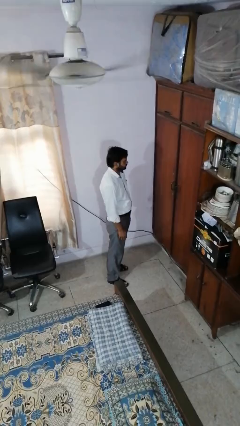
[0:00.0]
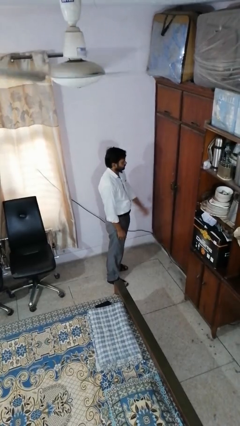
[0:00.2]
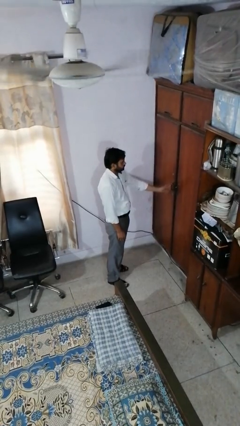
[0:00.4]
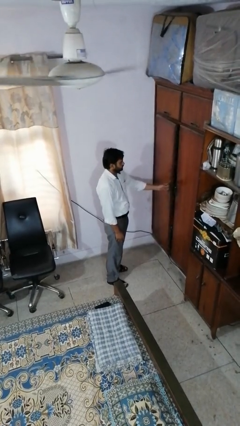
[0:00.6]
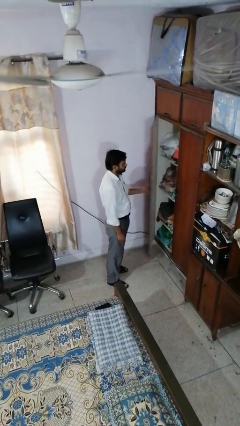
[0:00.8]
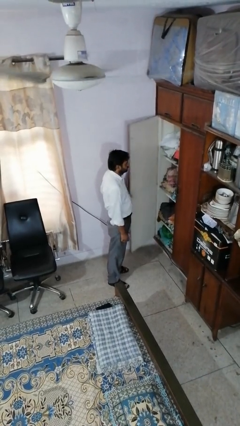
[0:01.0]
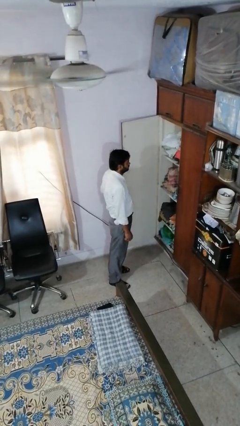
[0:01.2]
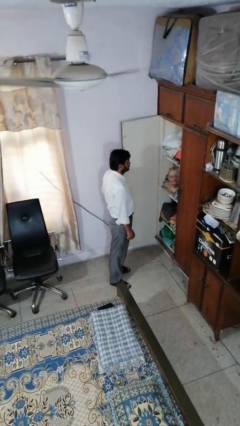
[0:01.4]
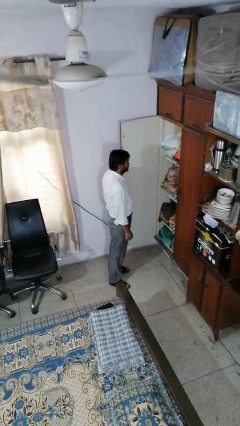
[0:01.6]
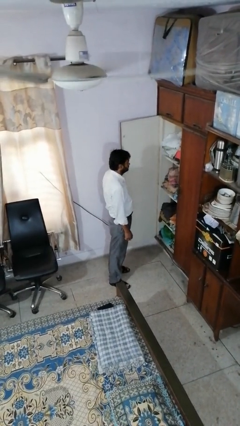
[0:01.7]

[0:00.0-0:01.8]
person opens closet door

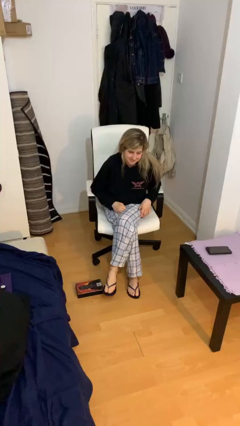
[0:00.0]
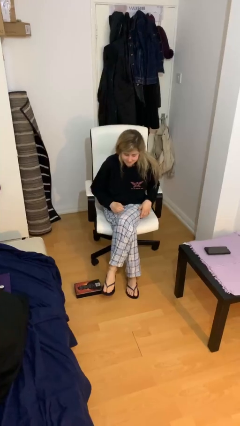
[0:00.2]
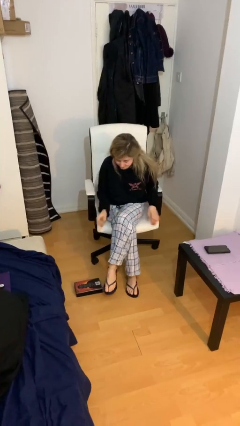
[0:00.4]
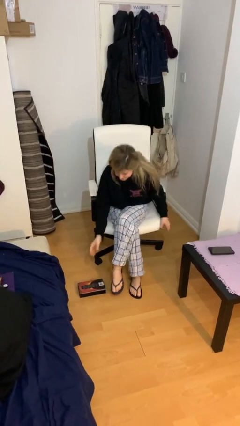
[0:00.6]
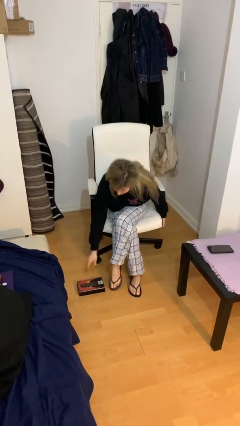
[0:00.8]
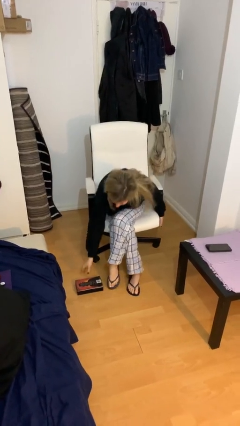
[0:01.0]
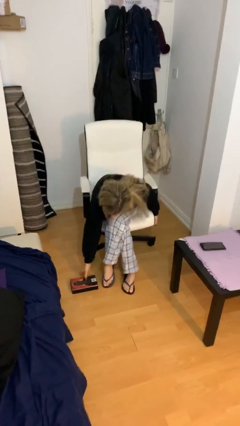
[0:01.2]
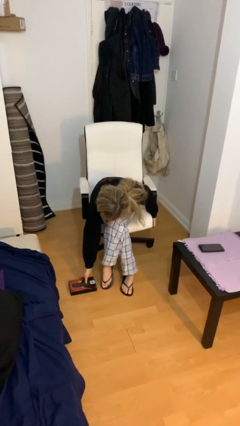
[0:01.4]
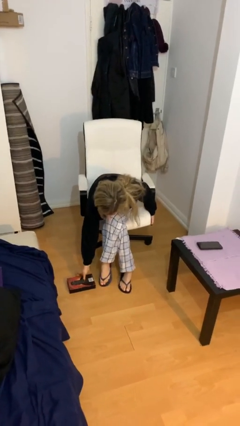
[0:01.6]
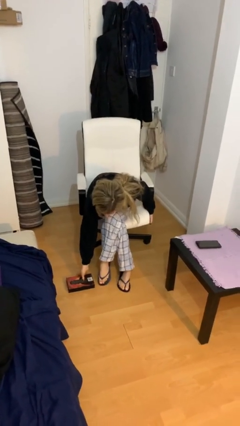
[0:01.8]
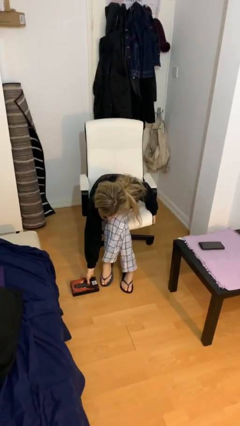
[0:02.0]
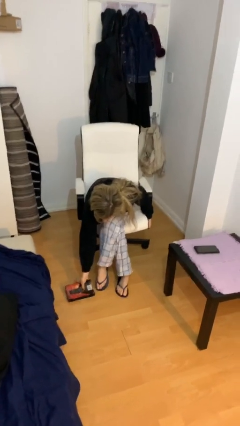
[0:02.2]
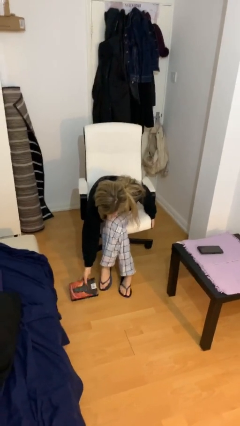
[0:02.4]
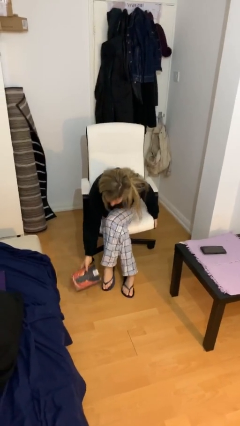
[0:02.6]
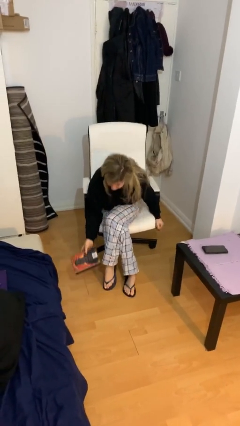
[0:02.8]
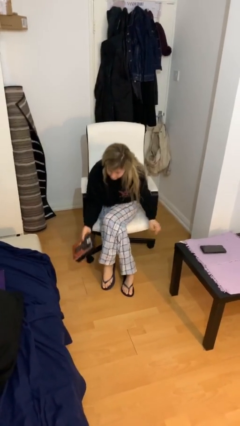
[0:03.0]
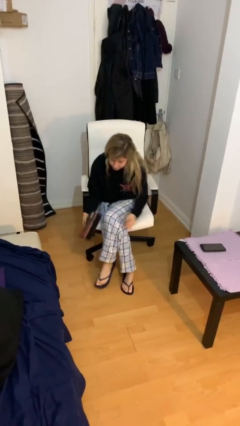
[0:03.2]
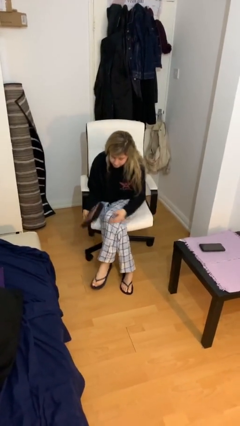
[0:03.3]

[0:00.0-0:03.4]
person picks up object from floor

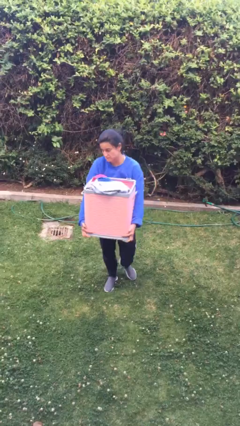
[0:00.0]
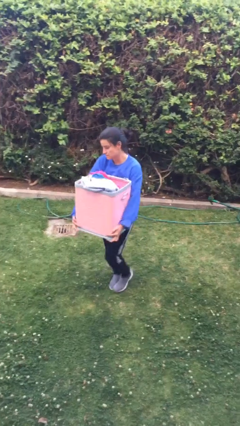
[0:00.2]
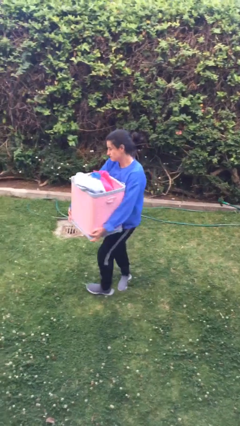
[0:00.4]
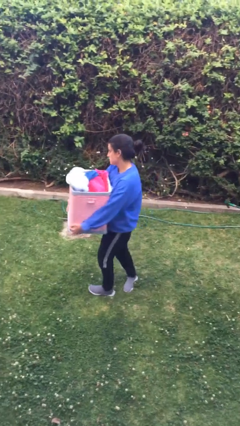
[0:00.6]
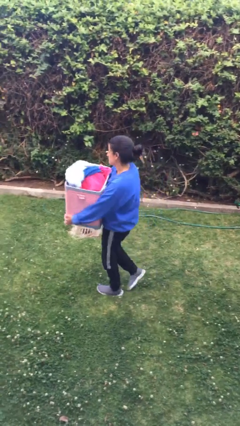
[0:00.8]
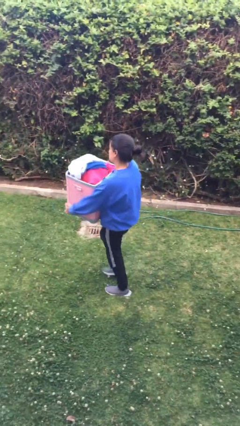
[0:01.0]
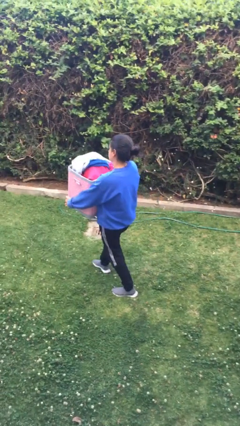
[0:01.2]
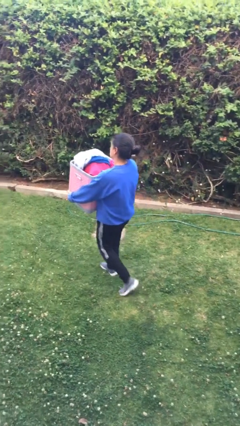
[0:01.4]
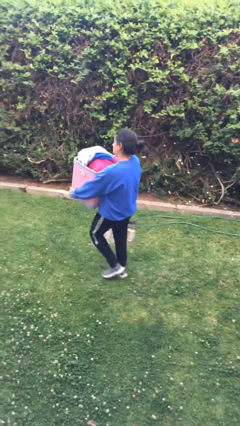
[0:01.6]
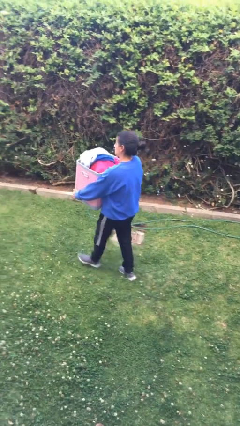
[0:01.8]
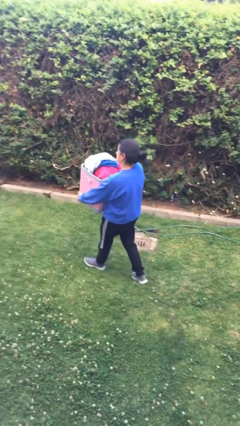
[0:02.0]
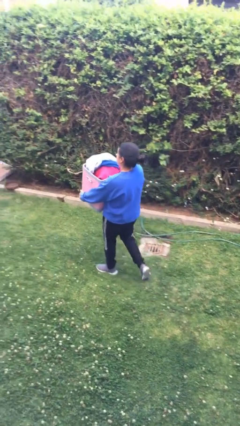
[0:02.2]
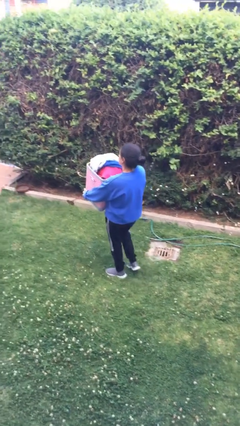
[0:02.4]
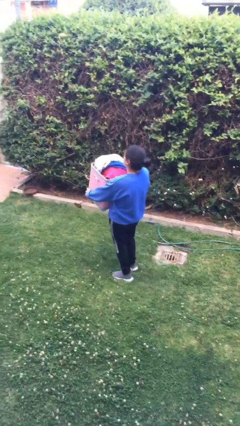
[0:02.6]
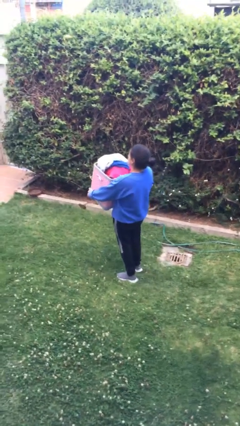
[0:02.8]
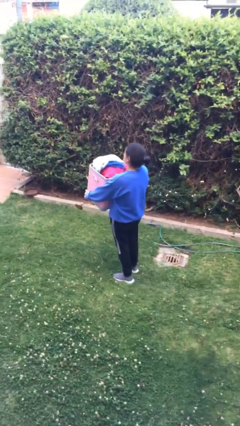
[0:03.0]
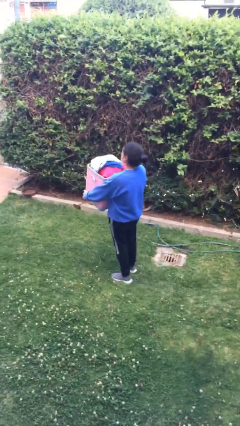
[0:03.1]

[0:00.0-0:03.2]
person carries groceries

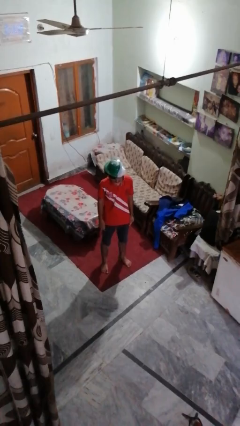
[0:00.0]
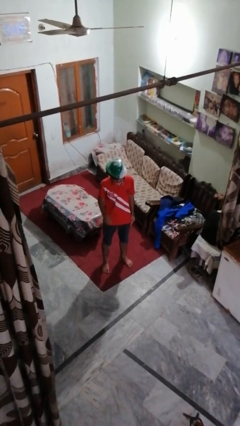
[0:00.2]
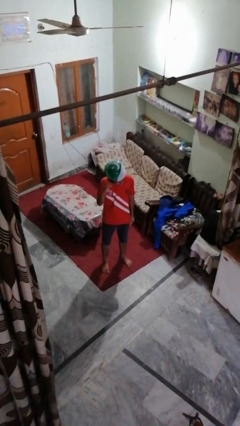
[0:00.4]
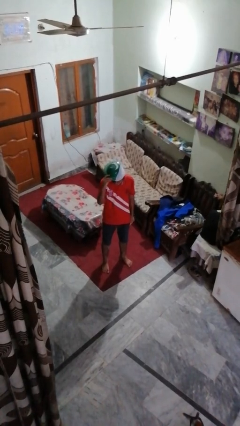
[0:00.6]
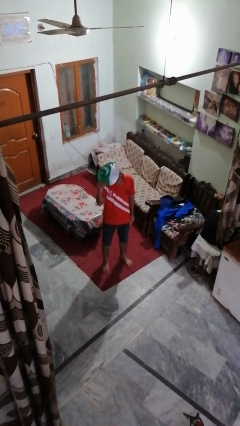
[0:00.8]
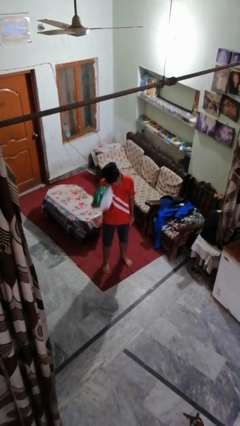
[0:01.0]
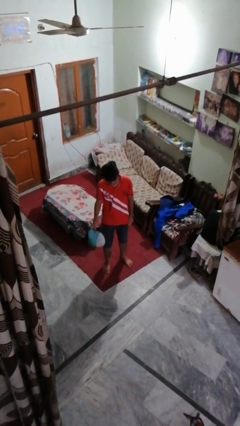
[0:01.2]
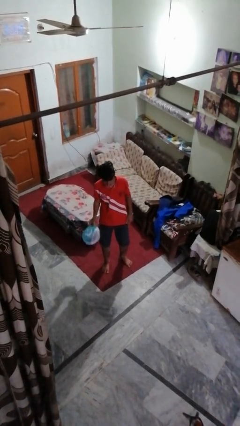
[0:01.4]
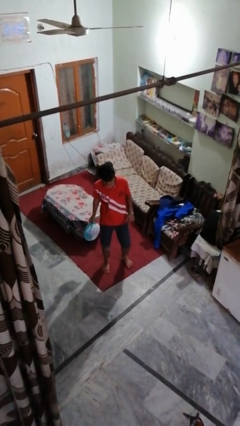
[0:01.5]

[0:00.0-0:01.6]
person takes off hat

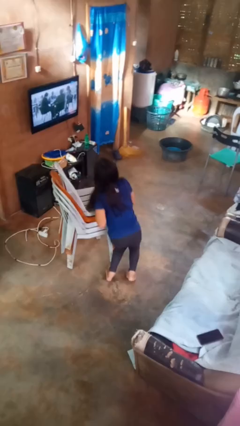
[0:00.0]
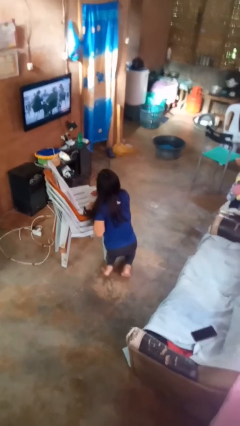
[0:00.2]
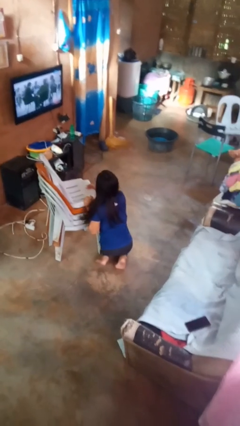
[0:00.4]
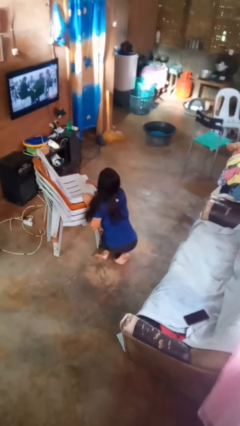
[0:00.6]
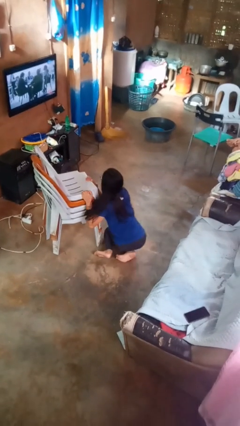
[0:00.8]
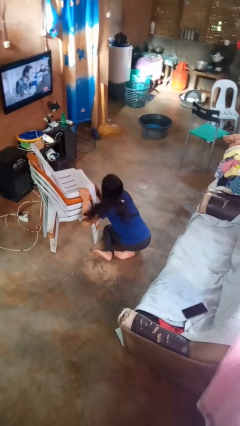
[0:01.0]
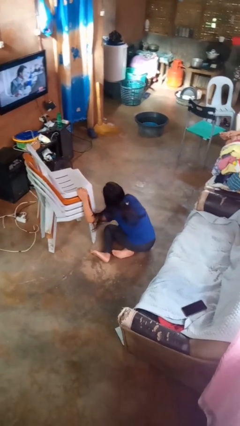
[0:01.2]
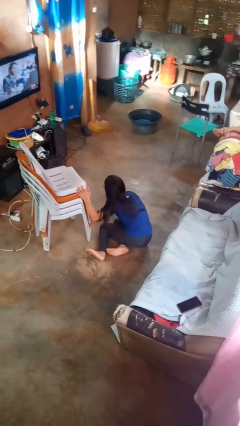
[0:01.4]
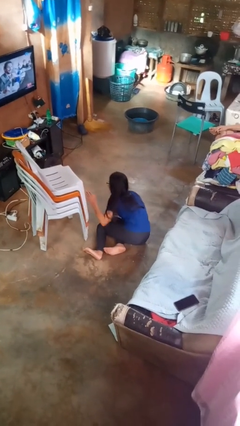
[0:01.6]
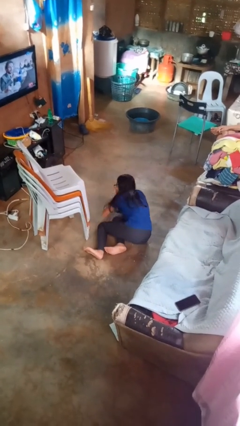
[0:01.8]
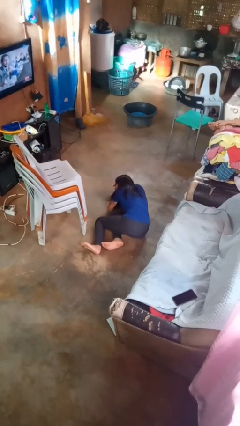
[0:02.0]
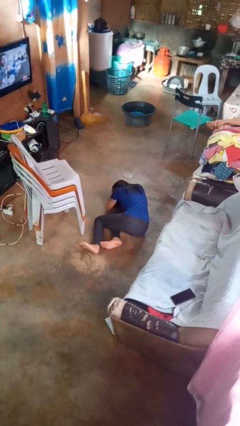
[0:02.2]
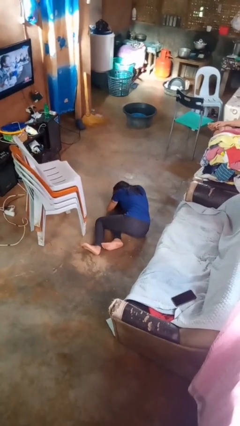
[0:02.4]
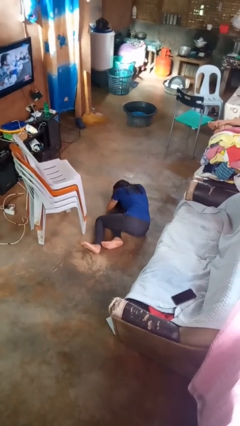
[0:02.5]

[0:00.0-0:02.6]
person lies down on floor

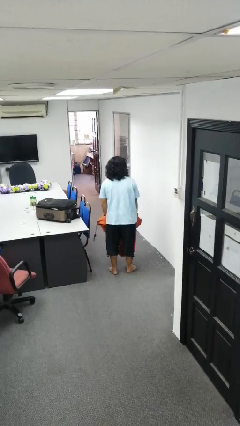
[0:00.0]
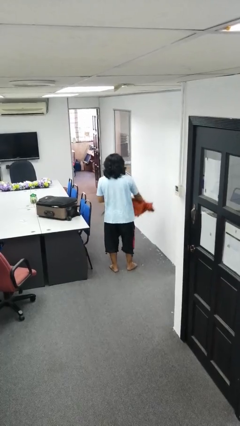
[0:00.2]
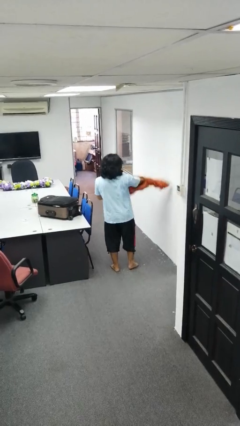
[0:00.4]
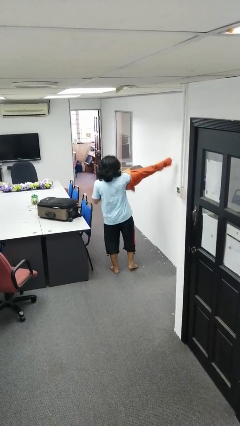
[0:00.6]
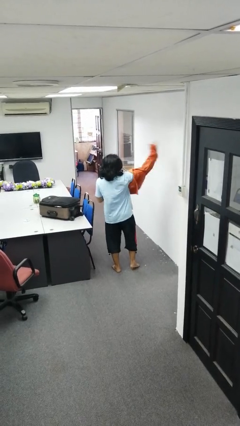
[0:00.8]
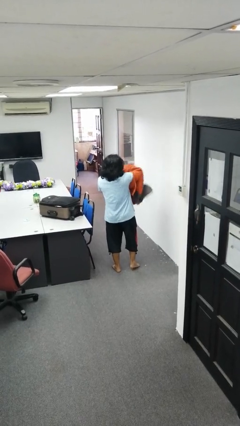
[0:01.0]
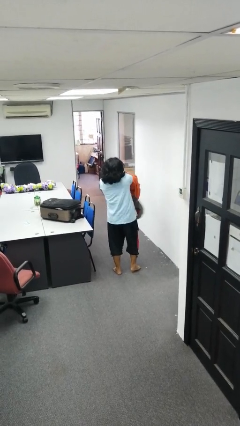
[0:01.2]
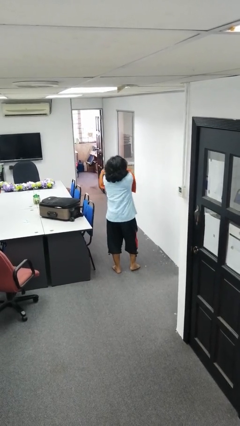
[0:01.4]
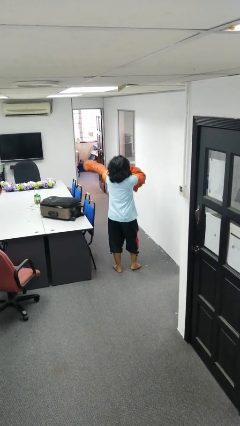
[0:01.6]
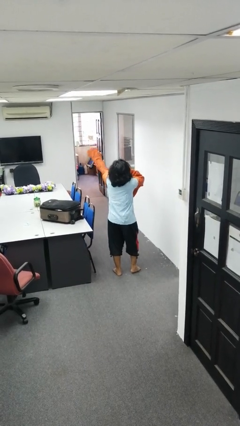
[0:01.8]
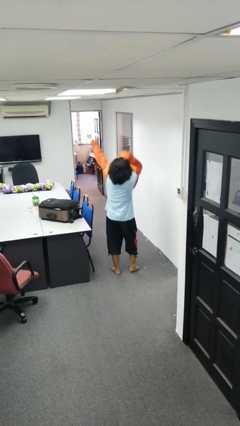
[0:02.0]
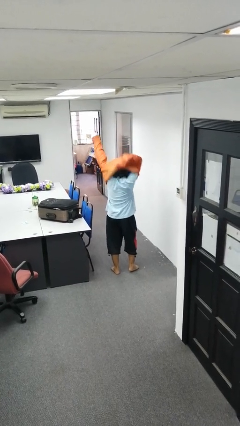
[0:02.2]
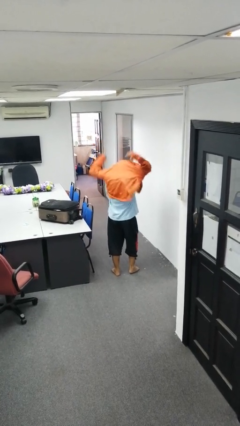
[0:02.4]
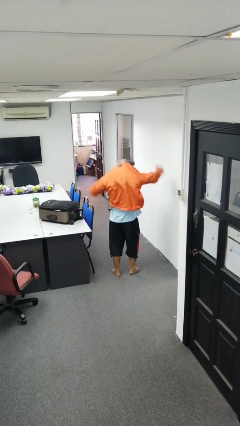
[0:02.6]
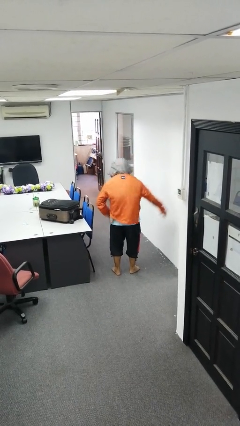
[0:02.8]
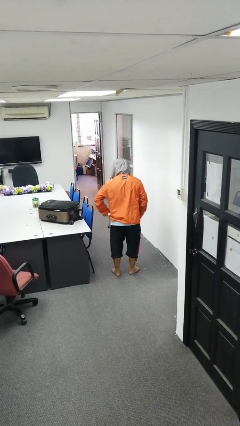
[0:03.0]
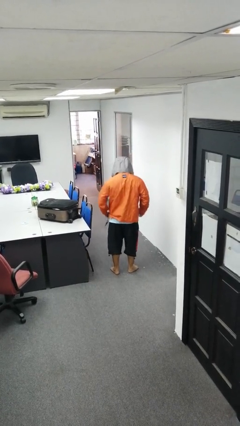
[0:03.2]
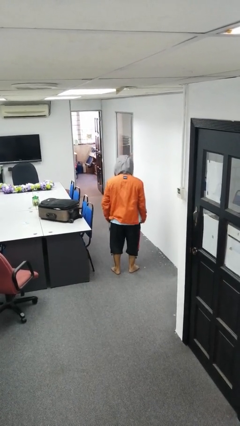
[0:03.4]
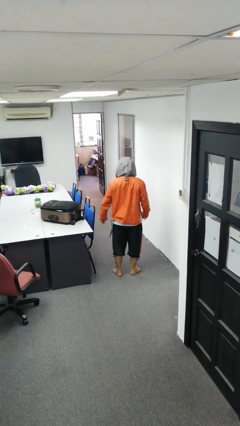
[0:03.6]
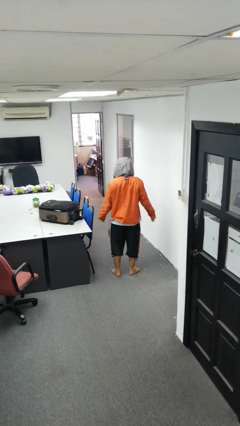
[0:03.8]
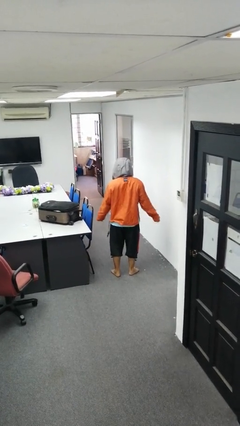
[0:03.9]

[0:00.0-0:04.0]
person puts on hoodie

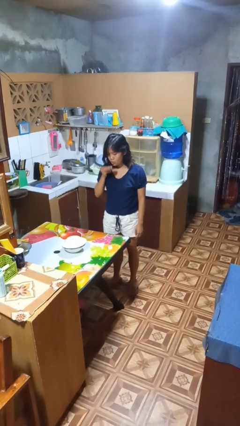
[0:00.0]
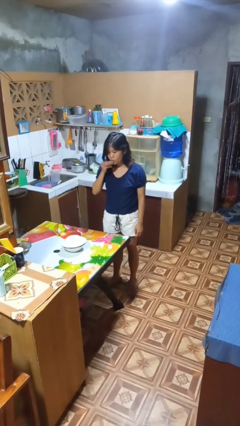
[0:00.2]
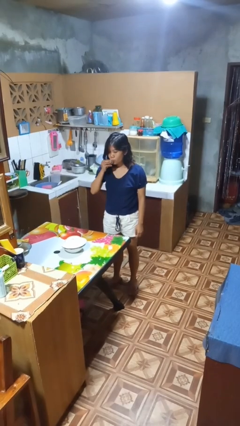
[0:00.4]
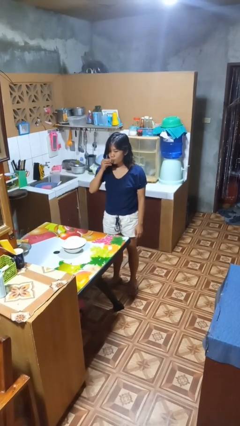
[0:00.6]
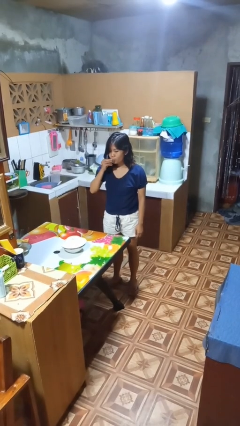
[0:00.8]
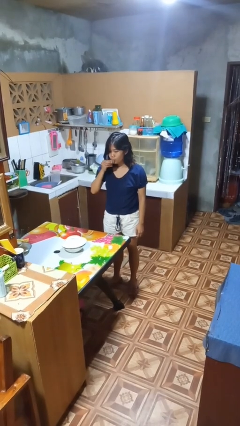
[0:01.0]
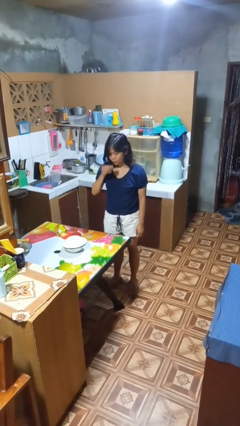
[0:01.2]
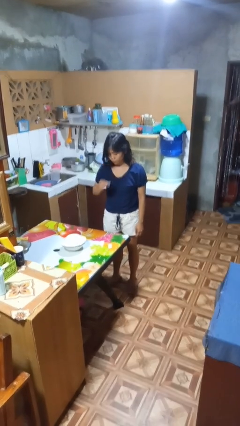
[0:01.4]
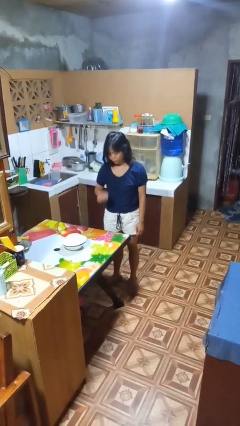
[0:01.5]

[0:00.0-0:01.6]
person drinks from shotglass
